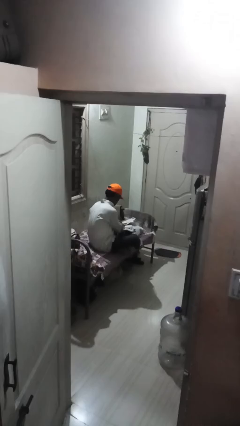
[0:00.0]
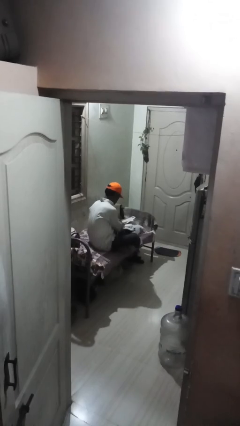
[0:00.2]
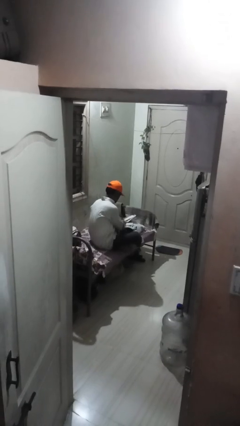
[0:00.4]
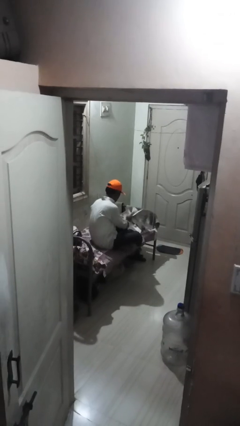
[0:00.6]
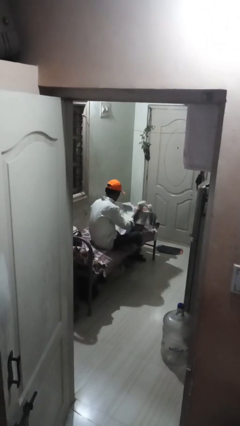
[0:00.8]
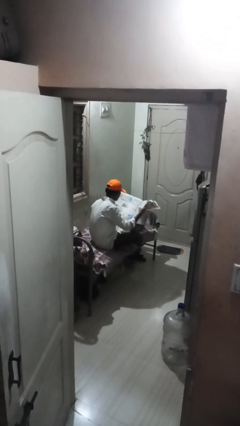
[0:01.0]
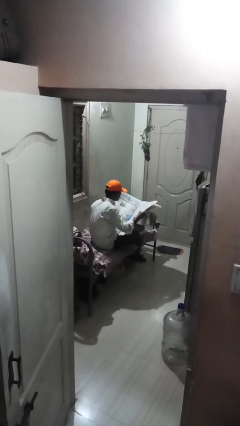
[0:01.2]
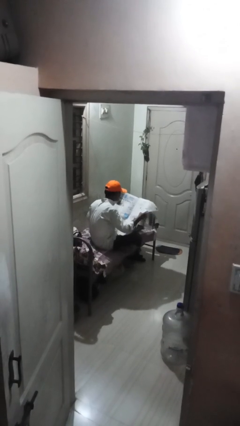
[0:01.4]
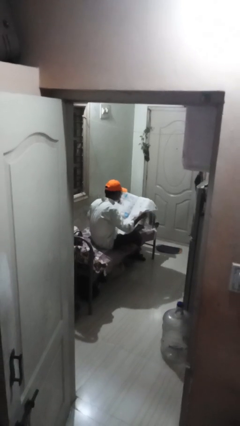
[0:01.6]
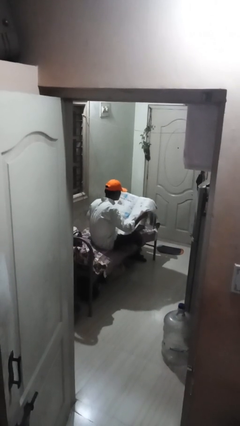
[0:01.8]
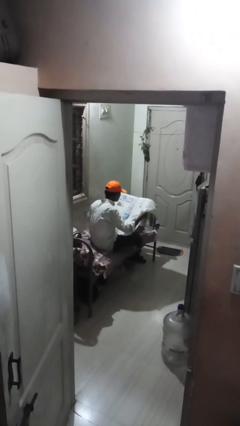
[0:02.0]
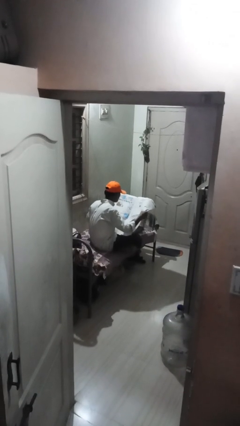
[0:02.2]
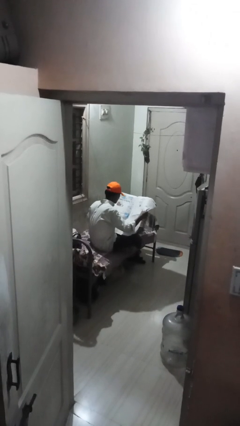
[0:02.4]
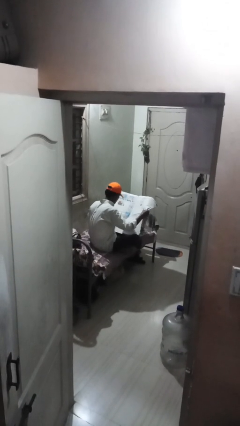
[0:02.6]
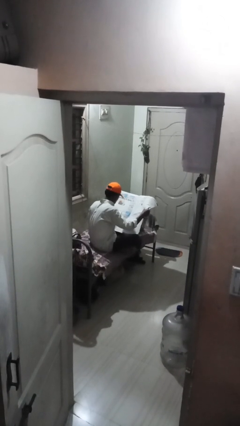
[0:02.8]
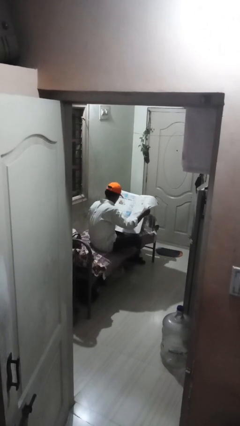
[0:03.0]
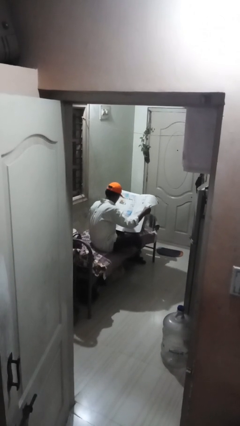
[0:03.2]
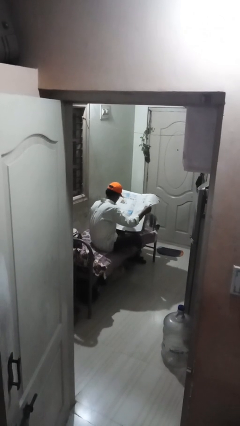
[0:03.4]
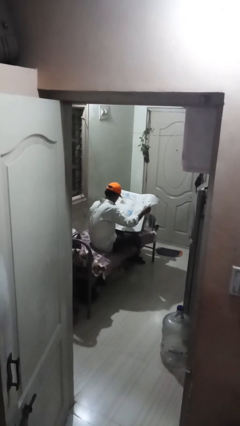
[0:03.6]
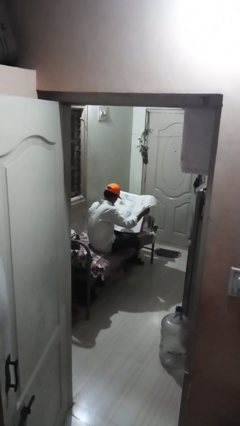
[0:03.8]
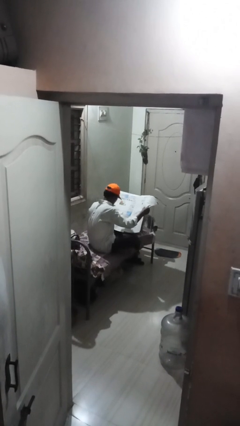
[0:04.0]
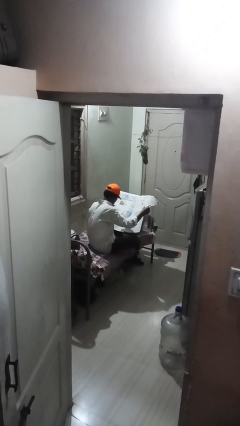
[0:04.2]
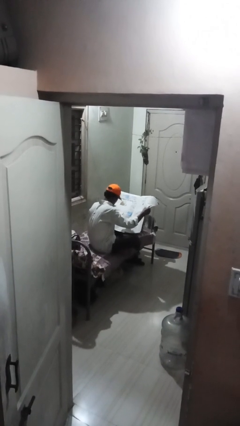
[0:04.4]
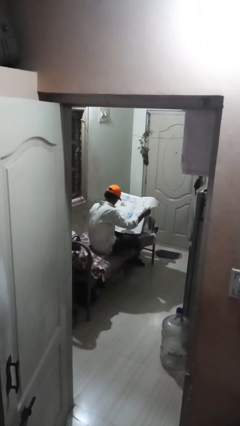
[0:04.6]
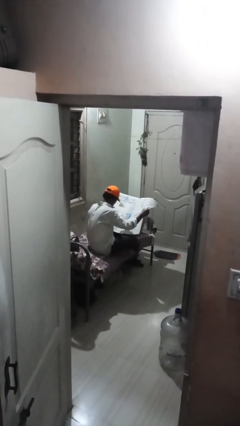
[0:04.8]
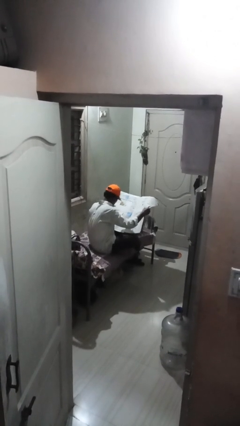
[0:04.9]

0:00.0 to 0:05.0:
person reads newspaper

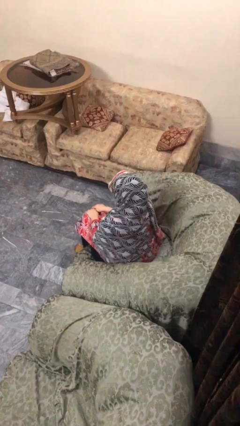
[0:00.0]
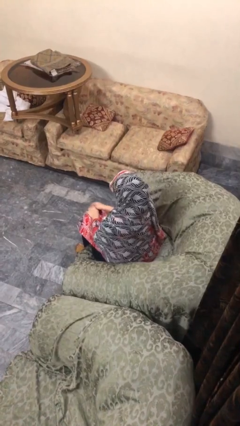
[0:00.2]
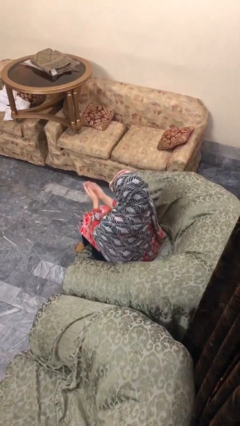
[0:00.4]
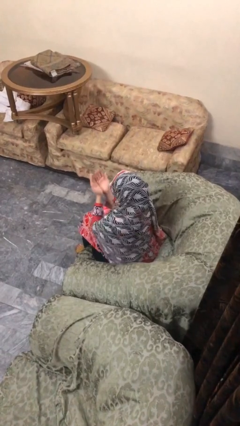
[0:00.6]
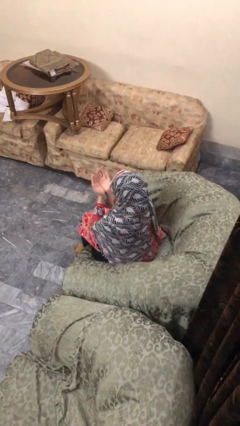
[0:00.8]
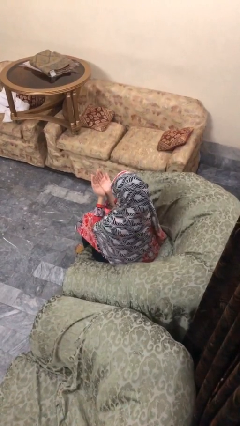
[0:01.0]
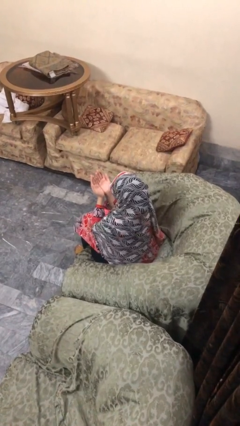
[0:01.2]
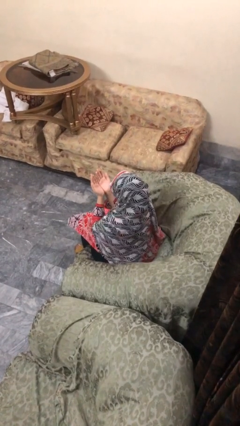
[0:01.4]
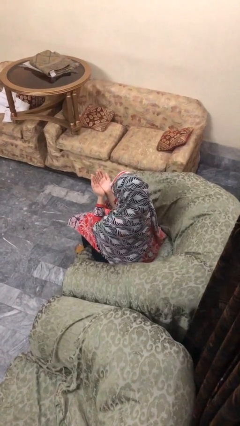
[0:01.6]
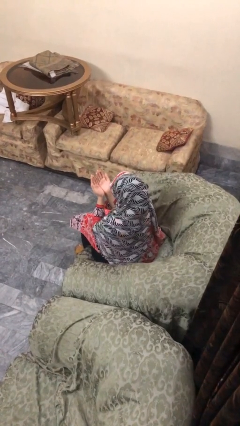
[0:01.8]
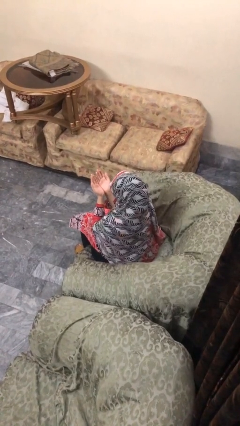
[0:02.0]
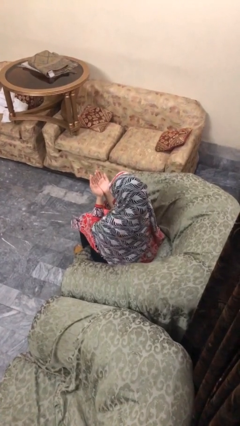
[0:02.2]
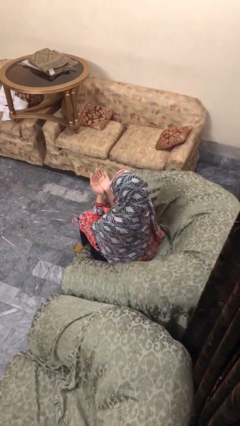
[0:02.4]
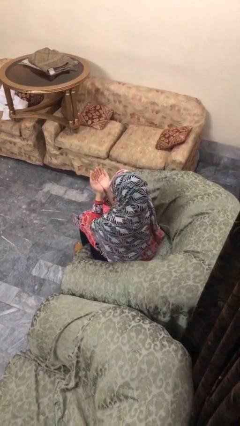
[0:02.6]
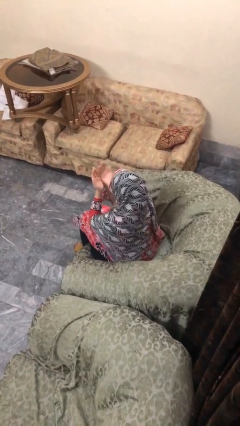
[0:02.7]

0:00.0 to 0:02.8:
person prays

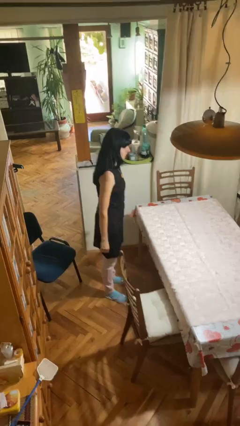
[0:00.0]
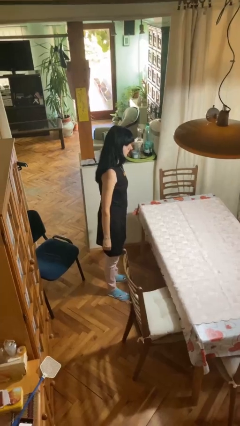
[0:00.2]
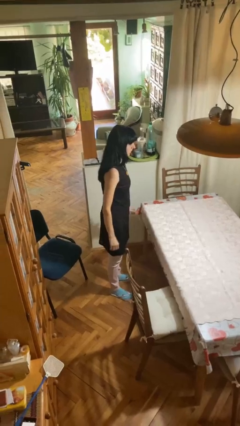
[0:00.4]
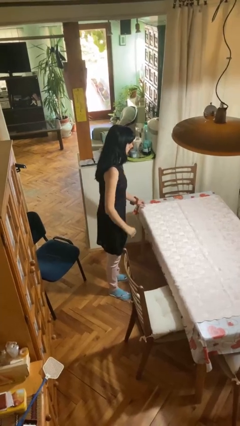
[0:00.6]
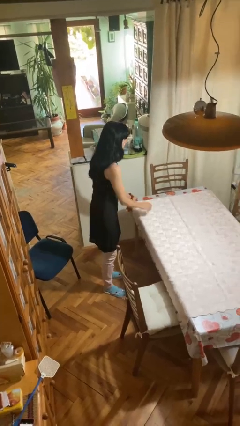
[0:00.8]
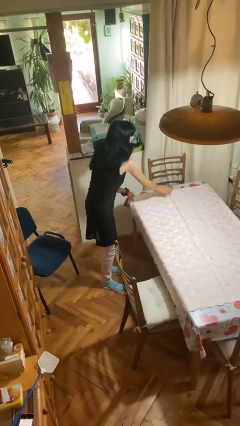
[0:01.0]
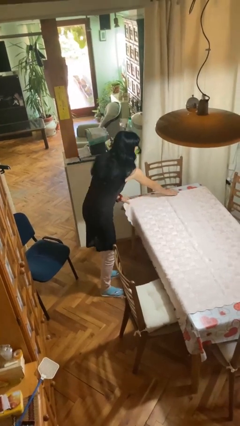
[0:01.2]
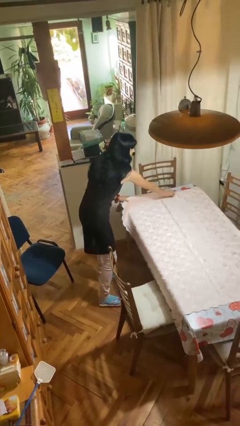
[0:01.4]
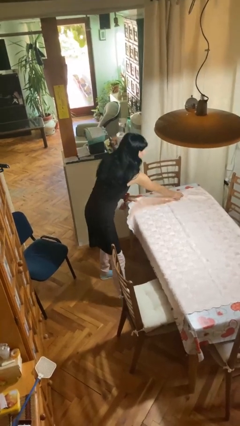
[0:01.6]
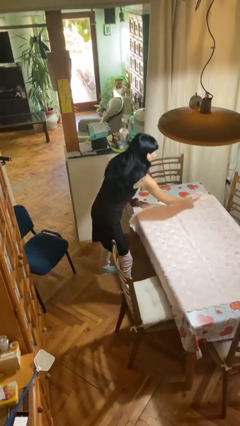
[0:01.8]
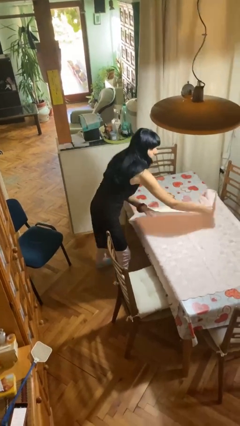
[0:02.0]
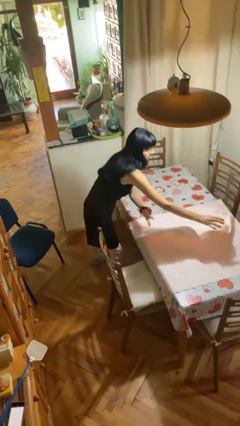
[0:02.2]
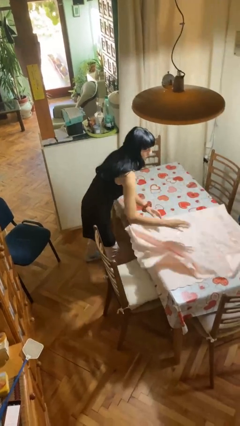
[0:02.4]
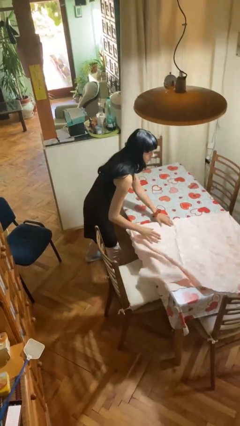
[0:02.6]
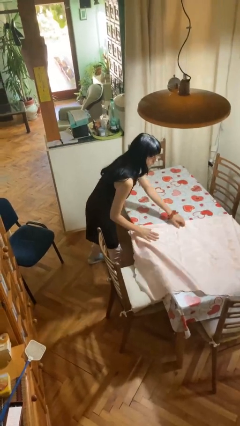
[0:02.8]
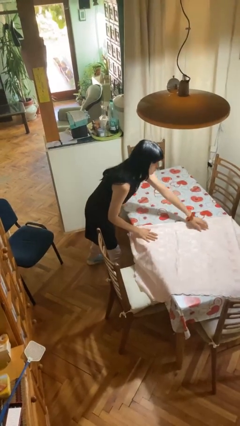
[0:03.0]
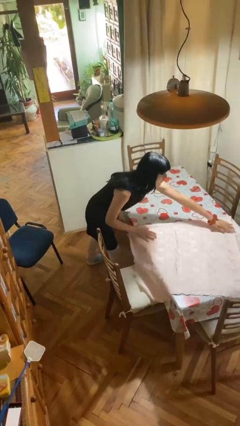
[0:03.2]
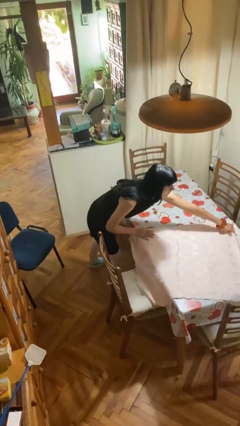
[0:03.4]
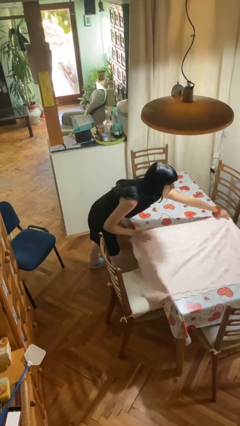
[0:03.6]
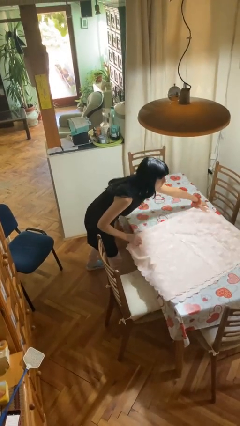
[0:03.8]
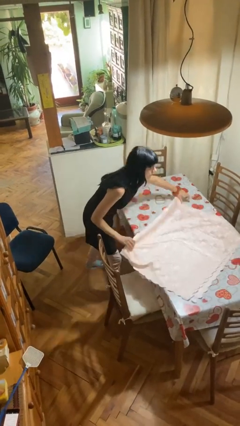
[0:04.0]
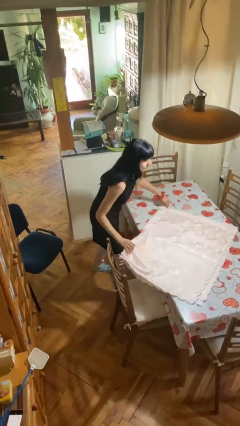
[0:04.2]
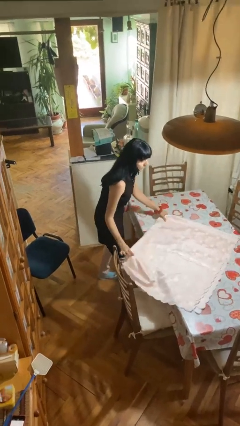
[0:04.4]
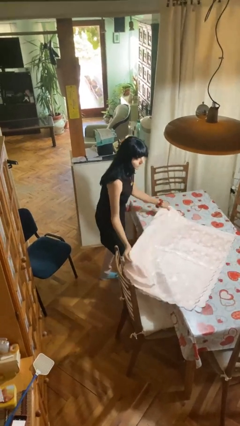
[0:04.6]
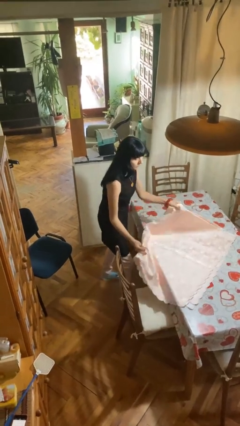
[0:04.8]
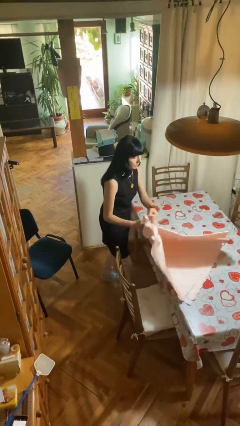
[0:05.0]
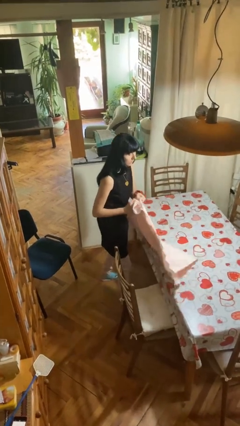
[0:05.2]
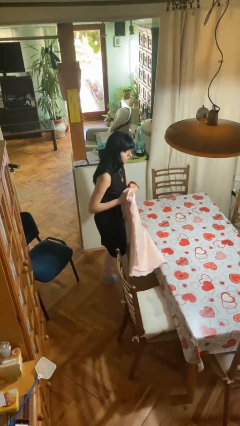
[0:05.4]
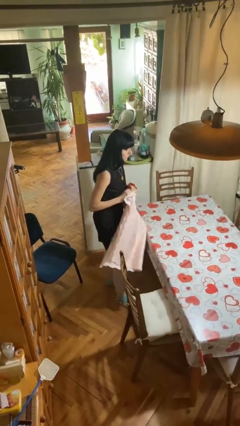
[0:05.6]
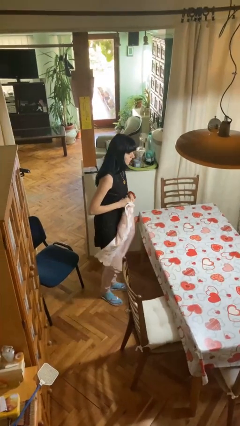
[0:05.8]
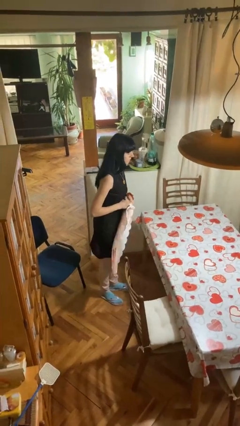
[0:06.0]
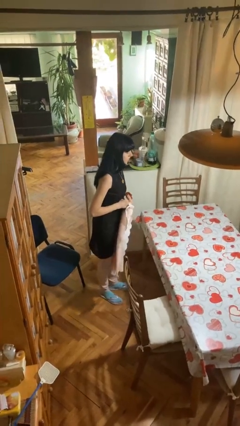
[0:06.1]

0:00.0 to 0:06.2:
person folds tablecloth

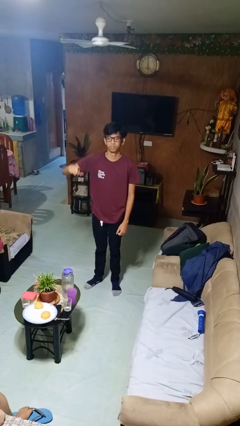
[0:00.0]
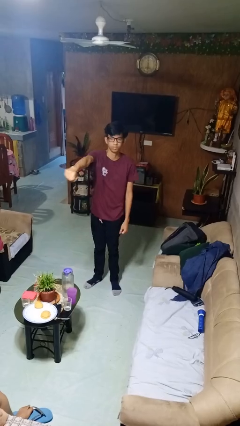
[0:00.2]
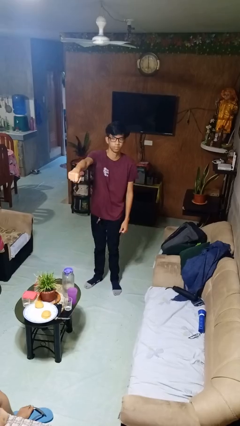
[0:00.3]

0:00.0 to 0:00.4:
person punches

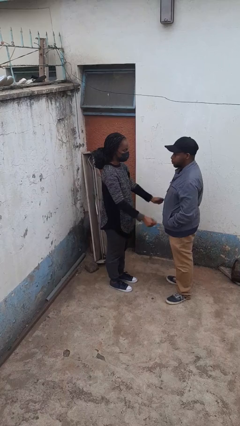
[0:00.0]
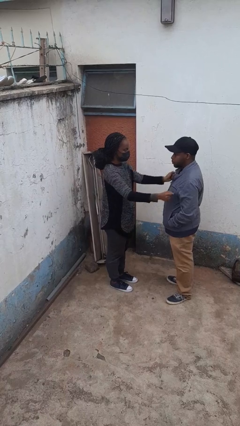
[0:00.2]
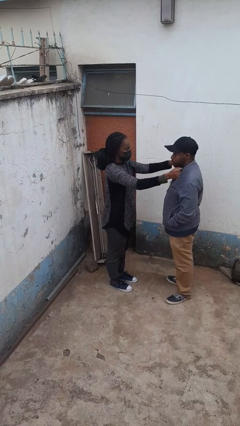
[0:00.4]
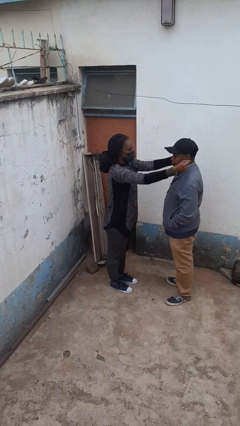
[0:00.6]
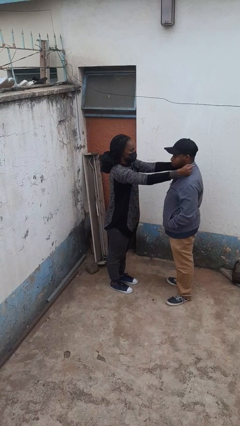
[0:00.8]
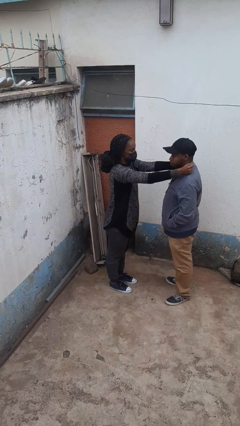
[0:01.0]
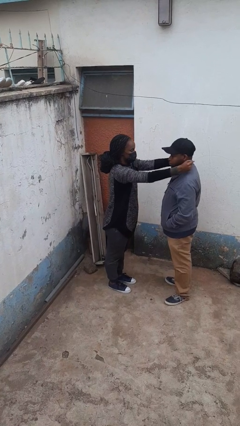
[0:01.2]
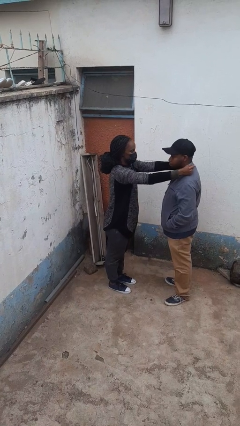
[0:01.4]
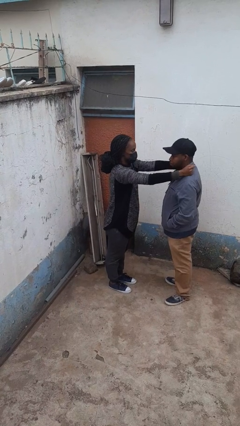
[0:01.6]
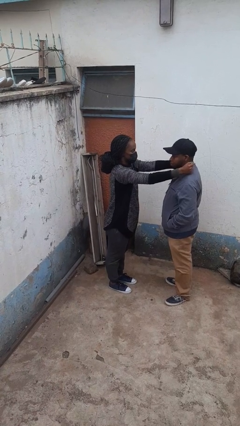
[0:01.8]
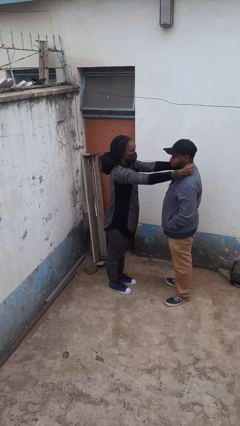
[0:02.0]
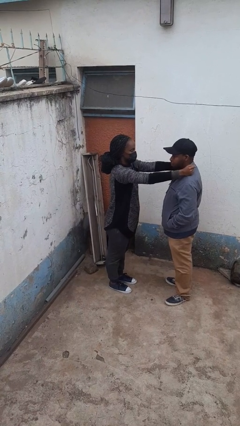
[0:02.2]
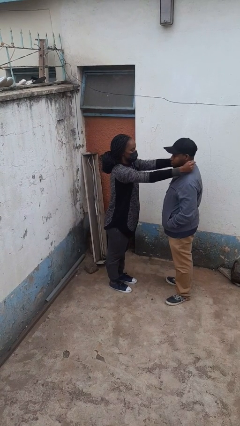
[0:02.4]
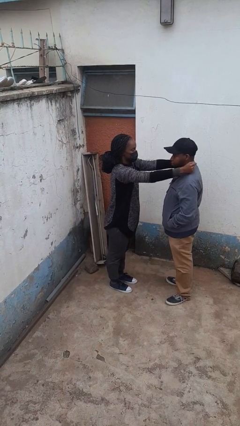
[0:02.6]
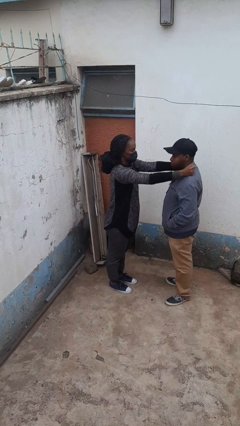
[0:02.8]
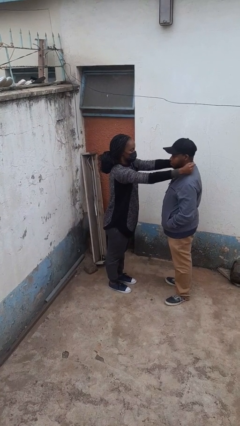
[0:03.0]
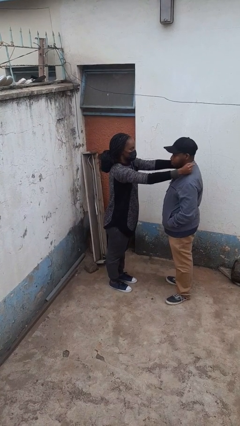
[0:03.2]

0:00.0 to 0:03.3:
person pounds shoulders of person

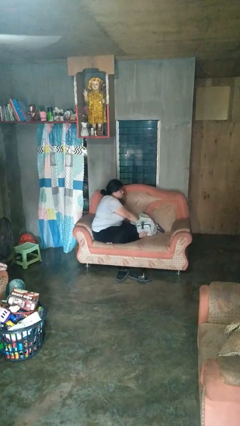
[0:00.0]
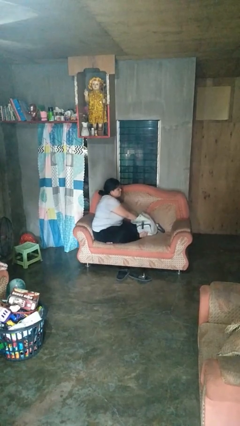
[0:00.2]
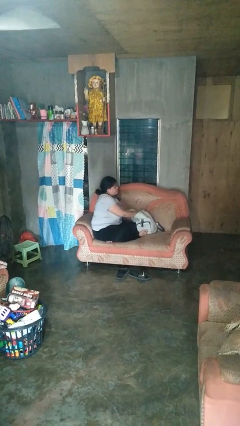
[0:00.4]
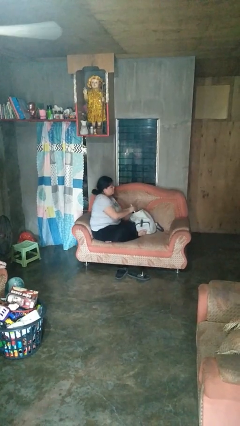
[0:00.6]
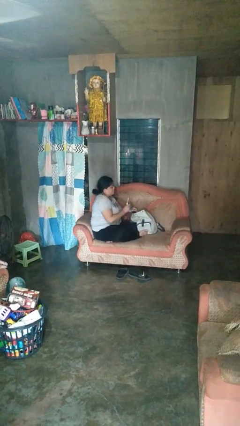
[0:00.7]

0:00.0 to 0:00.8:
person takes object from backpack
